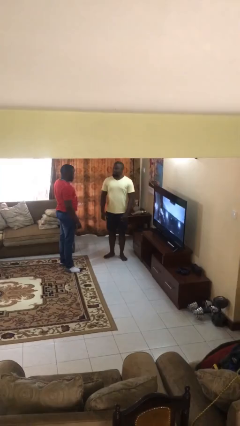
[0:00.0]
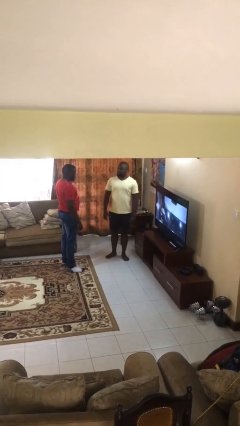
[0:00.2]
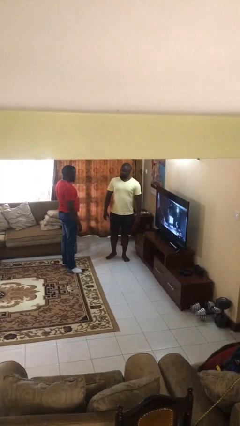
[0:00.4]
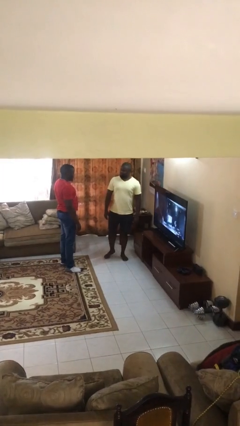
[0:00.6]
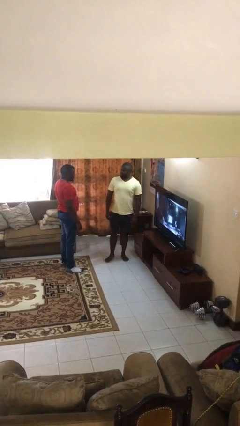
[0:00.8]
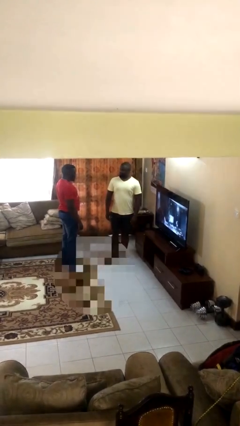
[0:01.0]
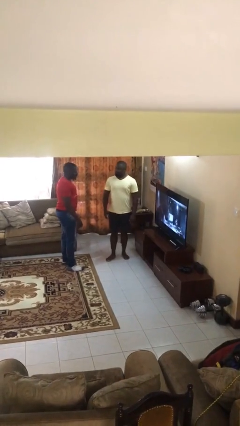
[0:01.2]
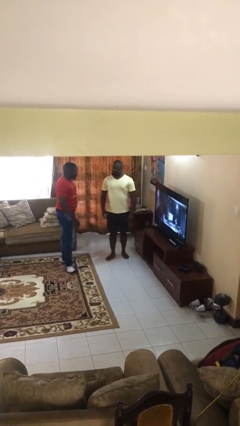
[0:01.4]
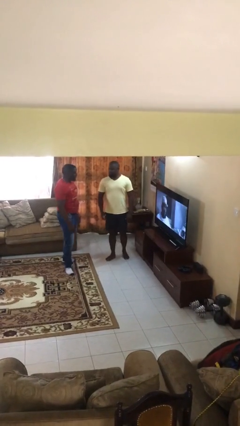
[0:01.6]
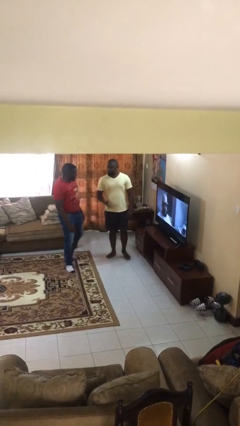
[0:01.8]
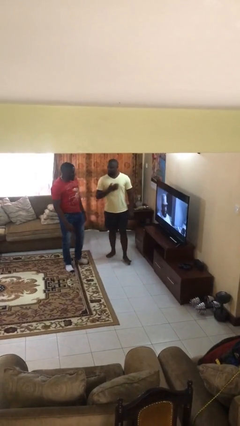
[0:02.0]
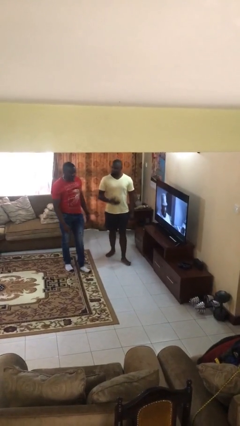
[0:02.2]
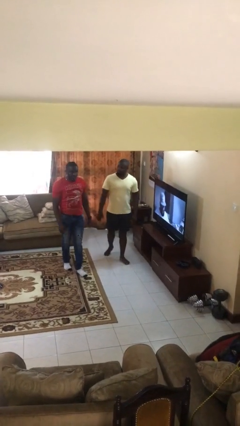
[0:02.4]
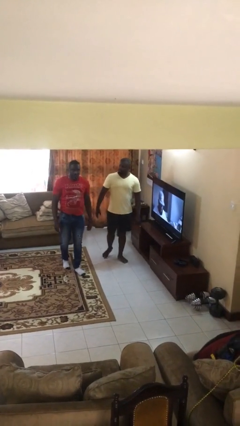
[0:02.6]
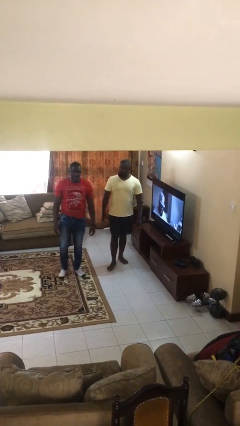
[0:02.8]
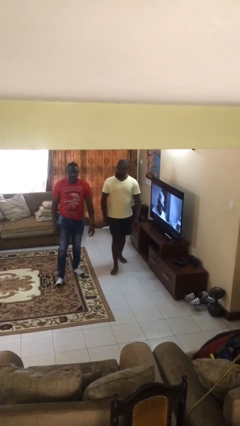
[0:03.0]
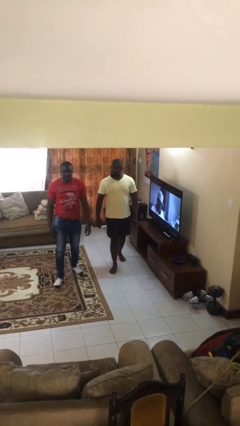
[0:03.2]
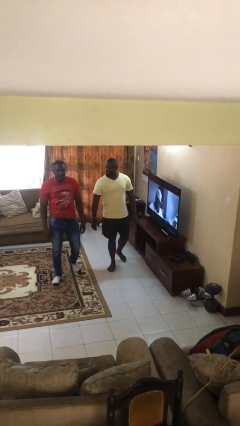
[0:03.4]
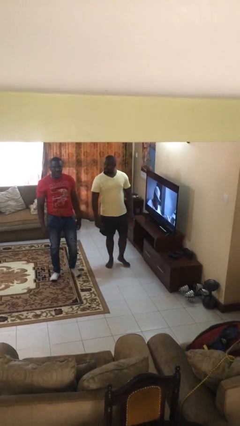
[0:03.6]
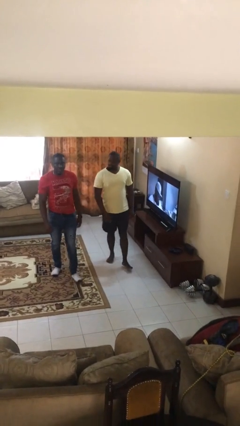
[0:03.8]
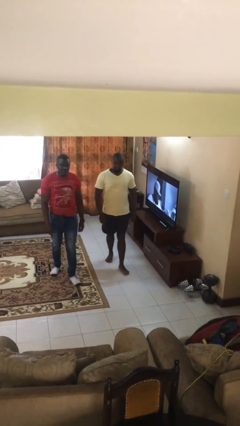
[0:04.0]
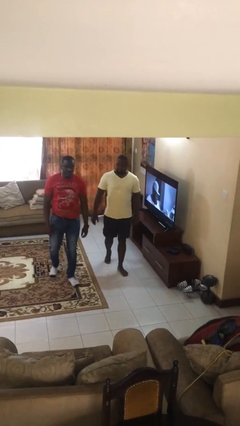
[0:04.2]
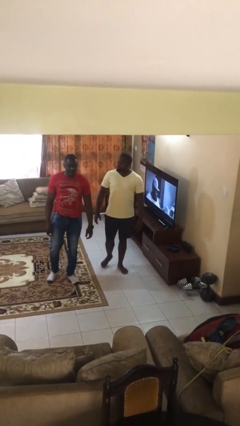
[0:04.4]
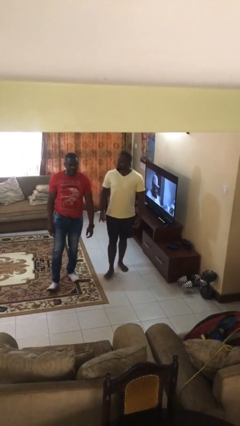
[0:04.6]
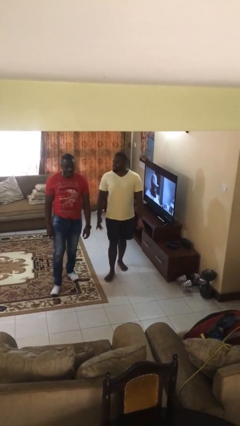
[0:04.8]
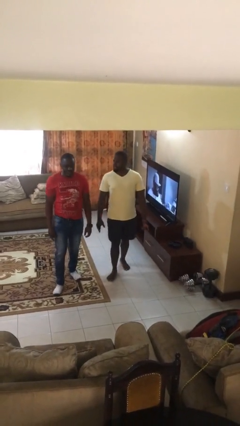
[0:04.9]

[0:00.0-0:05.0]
person talks to person

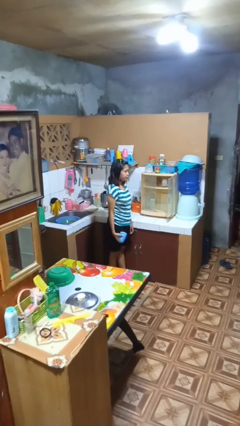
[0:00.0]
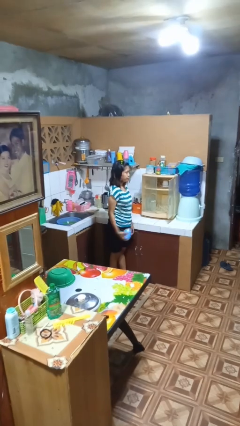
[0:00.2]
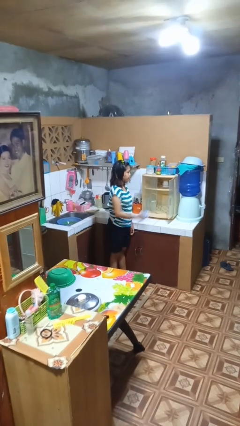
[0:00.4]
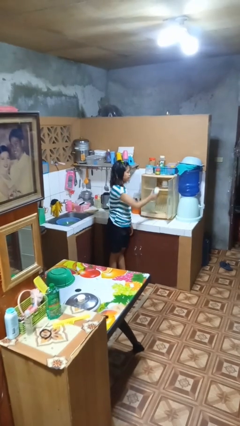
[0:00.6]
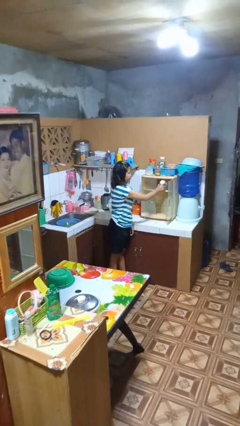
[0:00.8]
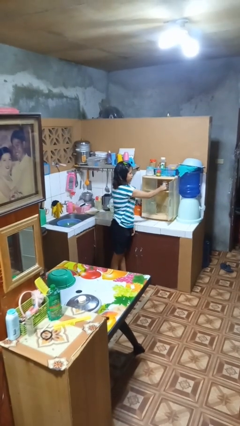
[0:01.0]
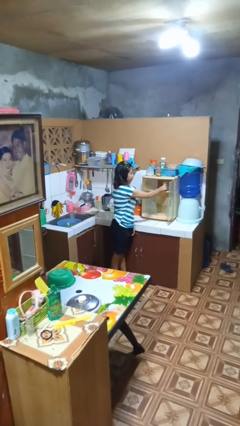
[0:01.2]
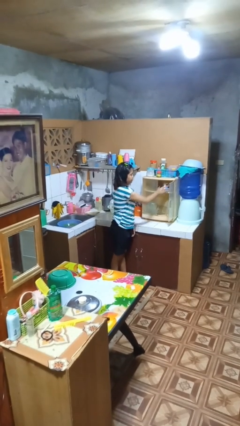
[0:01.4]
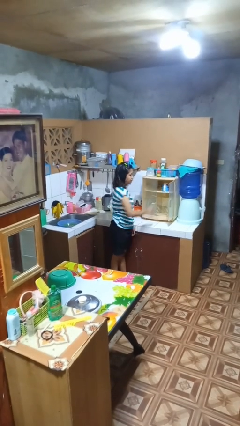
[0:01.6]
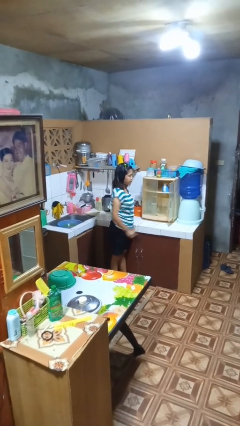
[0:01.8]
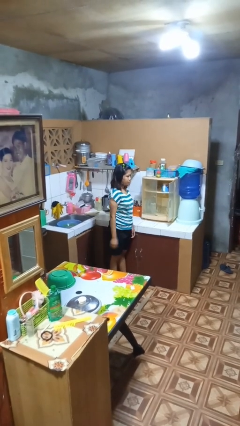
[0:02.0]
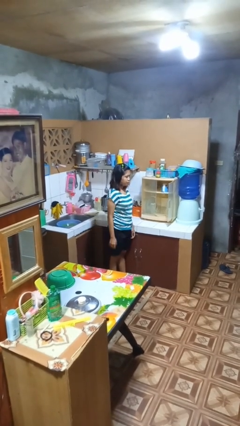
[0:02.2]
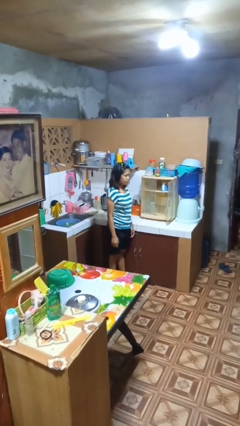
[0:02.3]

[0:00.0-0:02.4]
person puts object in cabinet

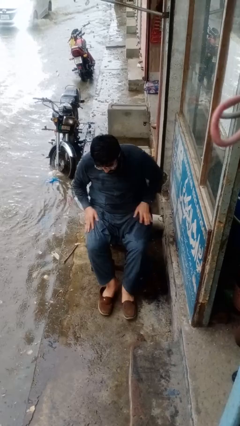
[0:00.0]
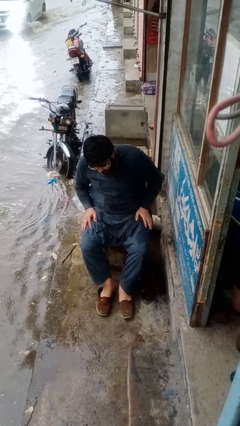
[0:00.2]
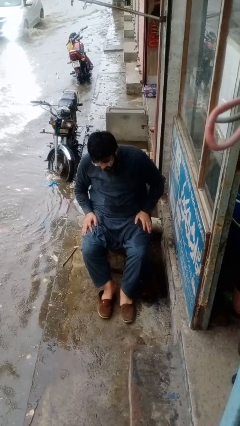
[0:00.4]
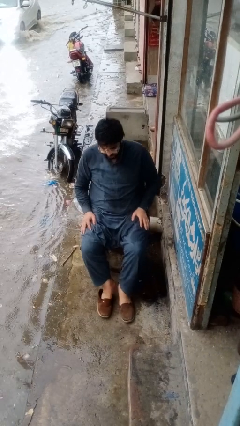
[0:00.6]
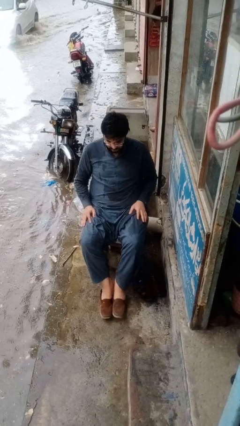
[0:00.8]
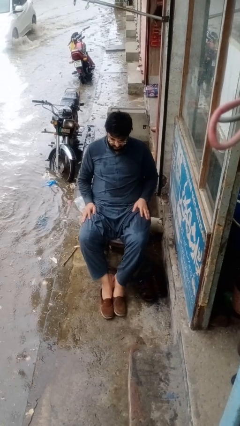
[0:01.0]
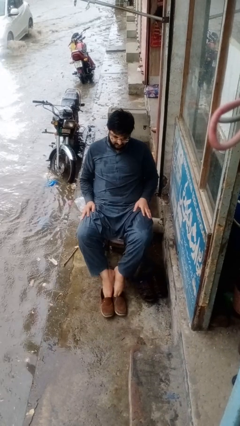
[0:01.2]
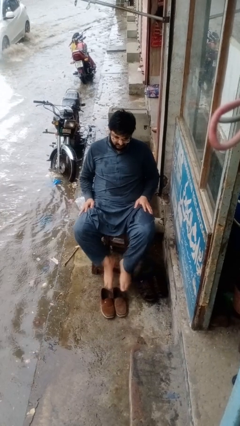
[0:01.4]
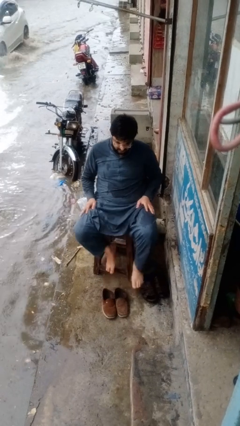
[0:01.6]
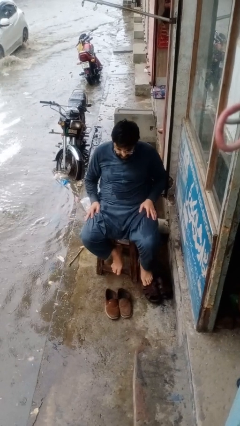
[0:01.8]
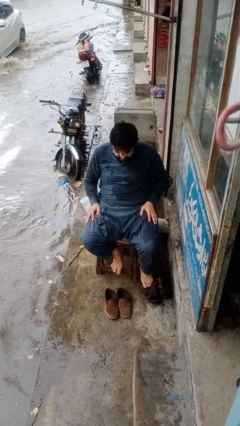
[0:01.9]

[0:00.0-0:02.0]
person takes off shoes

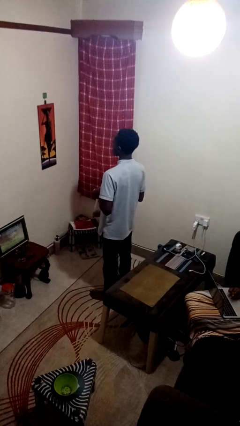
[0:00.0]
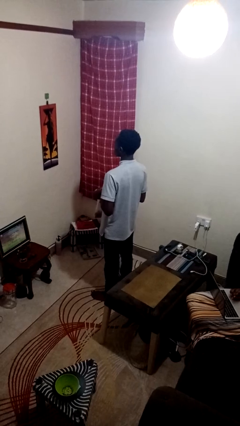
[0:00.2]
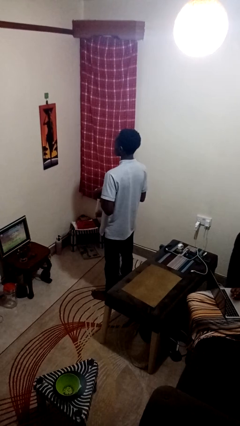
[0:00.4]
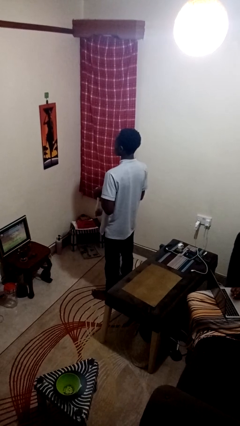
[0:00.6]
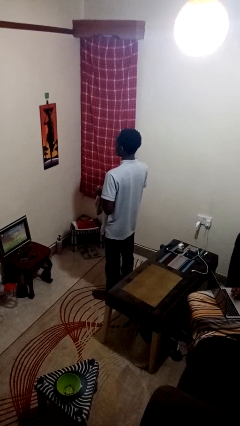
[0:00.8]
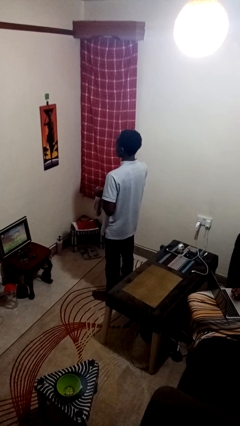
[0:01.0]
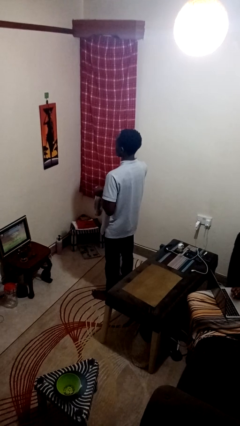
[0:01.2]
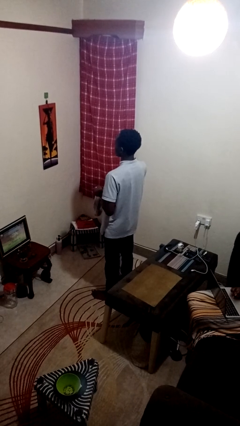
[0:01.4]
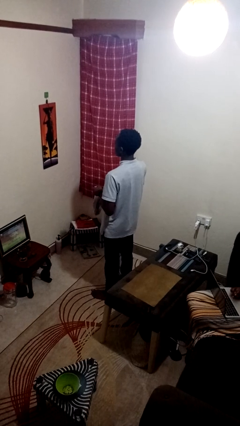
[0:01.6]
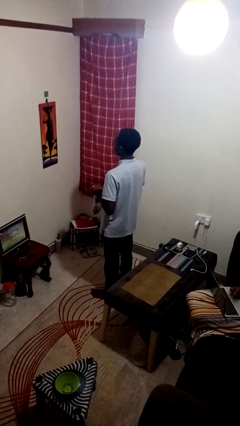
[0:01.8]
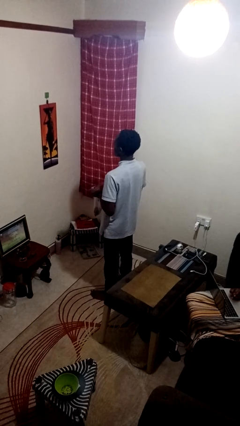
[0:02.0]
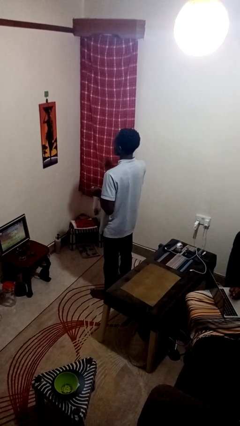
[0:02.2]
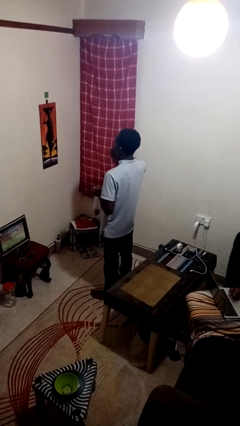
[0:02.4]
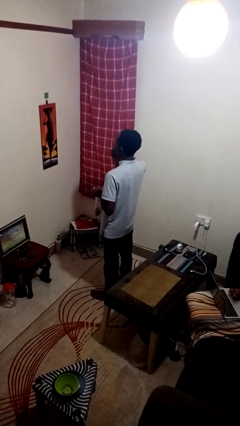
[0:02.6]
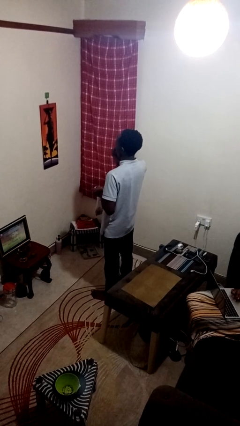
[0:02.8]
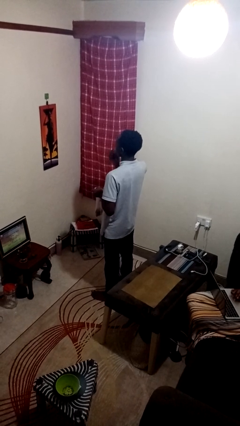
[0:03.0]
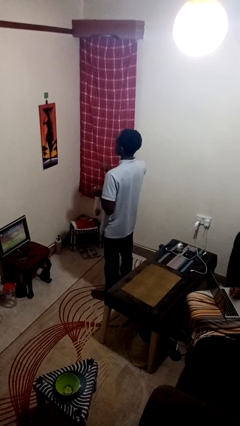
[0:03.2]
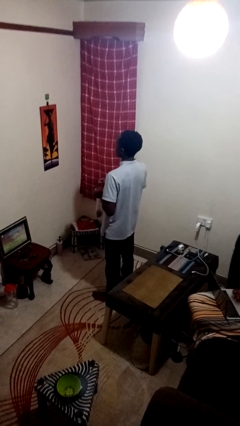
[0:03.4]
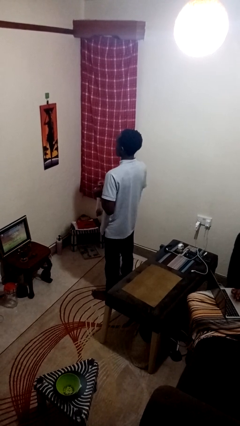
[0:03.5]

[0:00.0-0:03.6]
person eats snack from bag

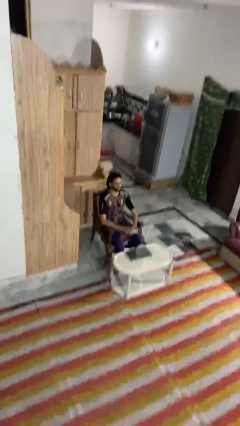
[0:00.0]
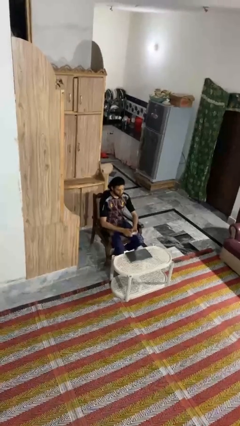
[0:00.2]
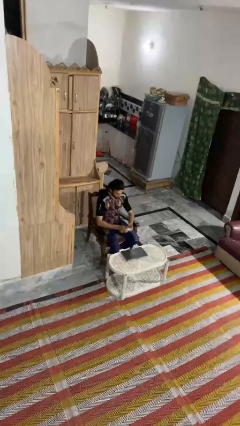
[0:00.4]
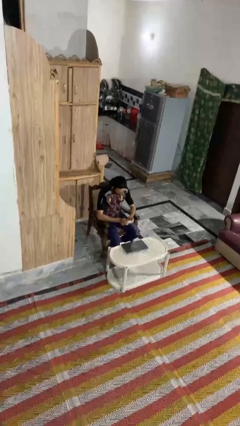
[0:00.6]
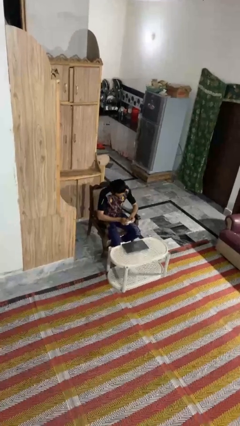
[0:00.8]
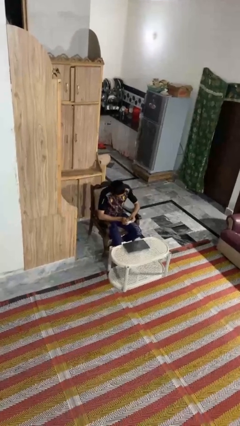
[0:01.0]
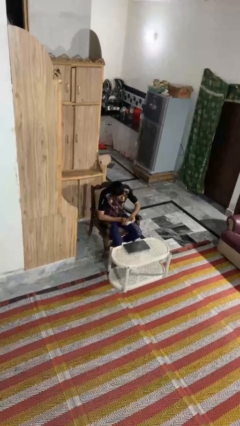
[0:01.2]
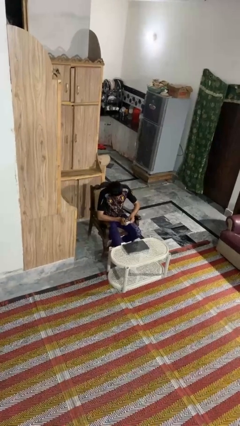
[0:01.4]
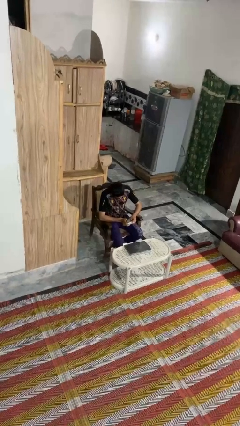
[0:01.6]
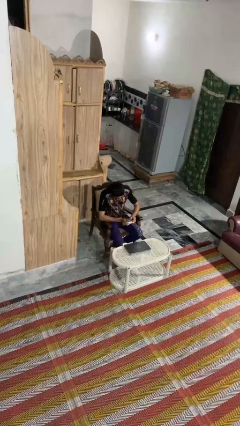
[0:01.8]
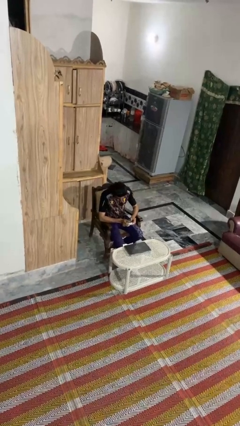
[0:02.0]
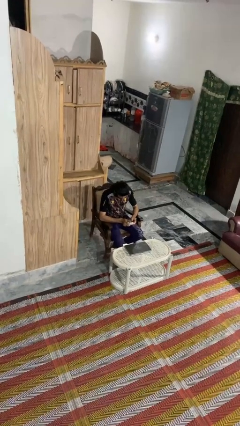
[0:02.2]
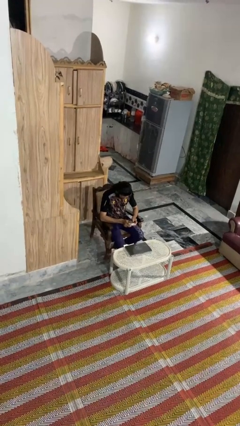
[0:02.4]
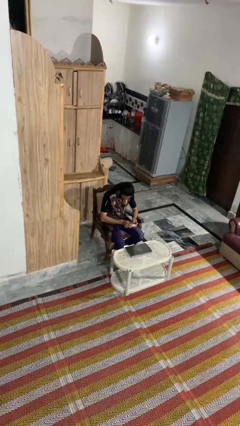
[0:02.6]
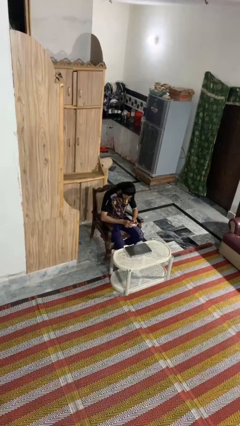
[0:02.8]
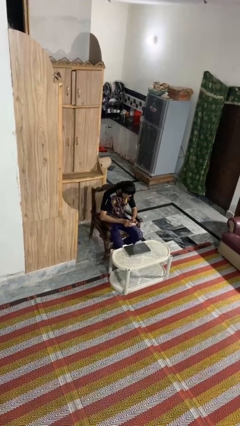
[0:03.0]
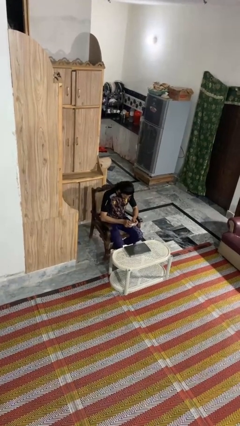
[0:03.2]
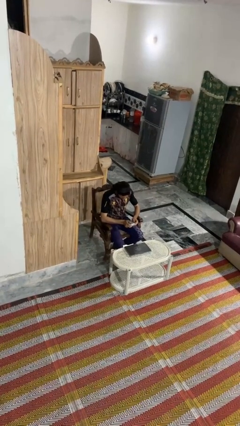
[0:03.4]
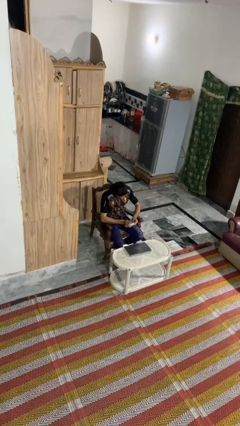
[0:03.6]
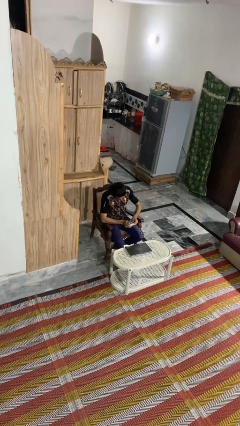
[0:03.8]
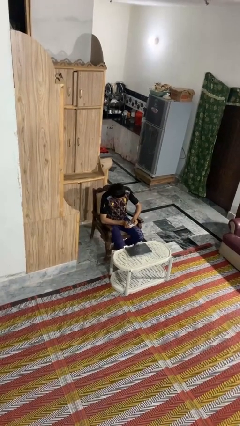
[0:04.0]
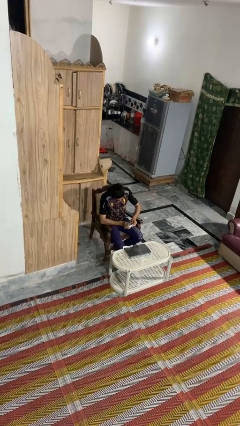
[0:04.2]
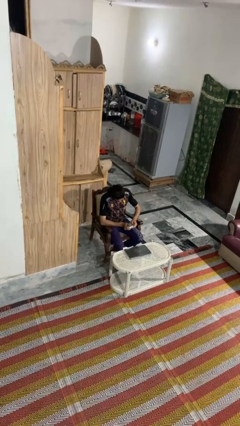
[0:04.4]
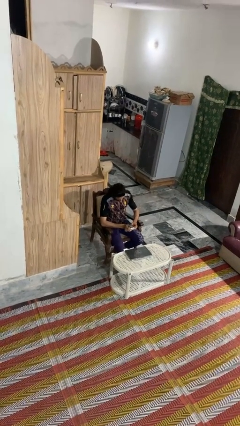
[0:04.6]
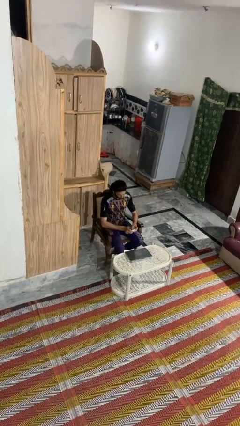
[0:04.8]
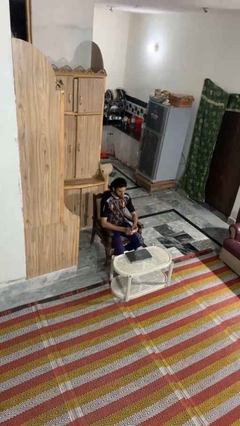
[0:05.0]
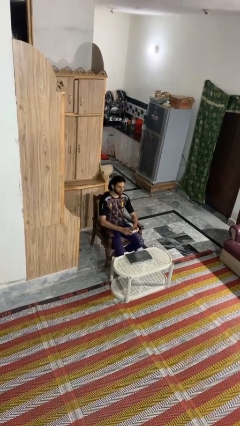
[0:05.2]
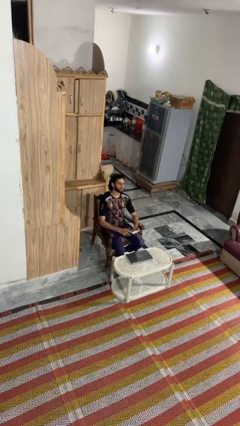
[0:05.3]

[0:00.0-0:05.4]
person interacts with handheld game
